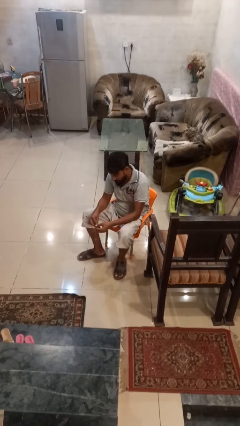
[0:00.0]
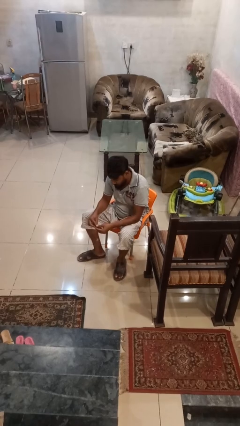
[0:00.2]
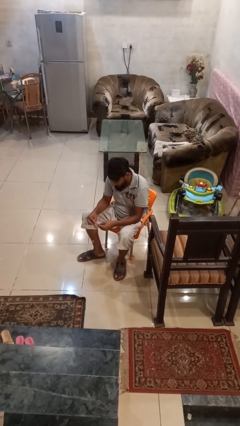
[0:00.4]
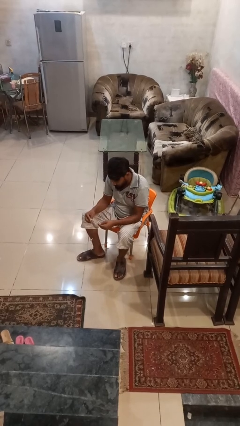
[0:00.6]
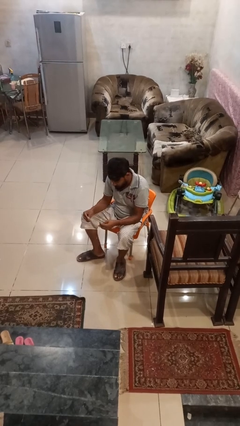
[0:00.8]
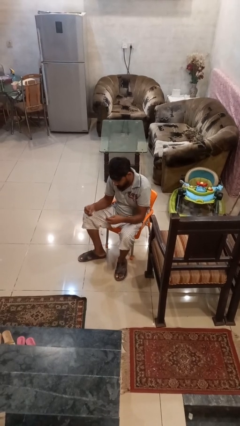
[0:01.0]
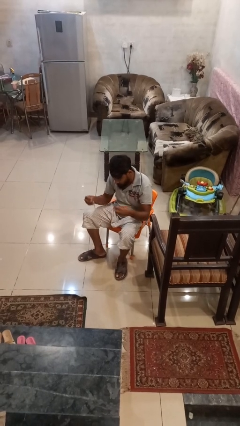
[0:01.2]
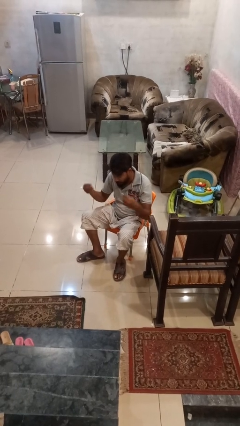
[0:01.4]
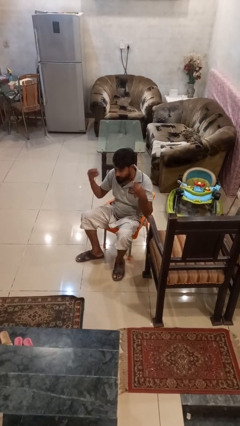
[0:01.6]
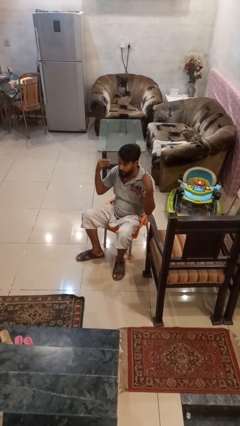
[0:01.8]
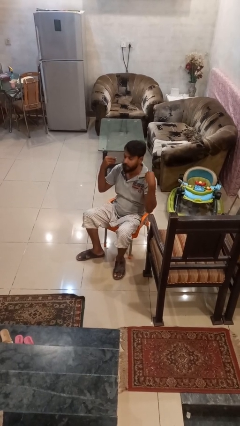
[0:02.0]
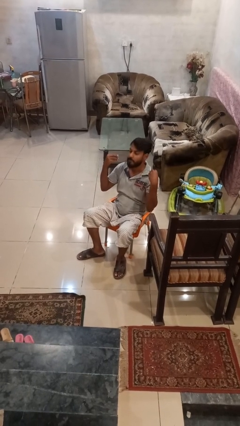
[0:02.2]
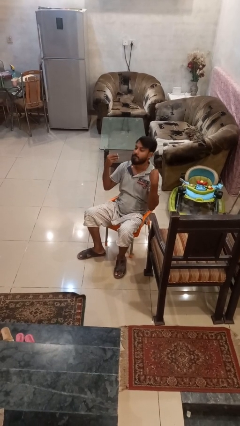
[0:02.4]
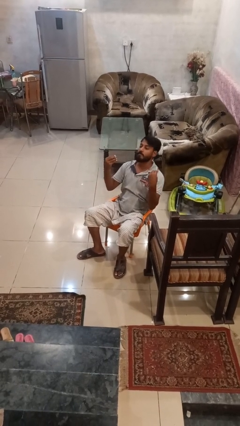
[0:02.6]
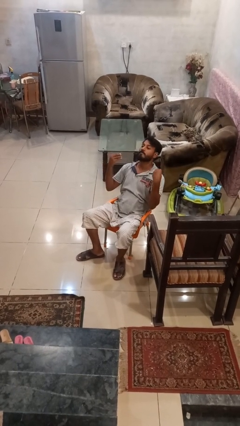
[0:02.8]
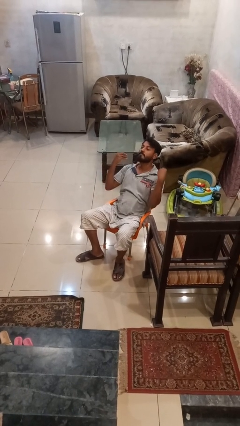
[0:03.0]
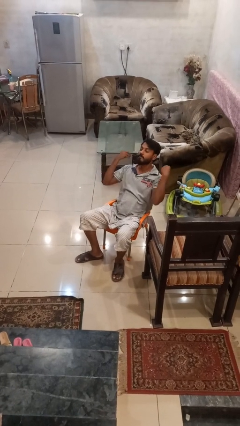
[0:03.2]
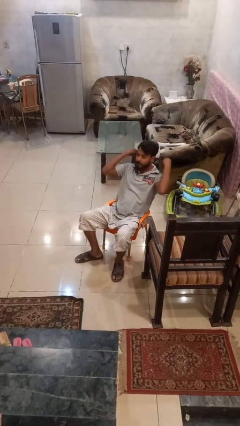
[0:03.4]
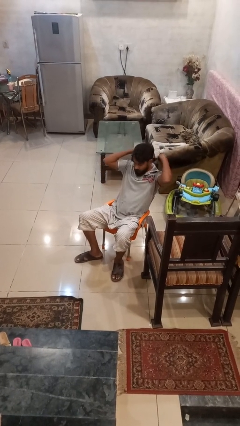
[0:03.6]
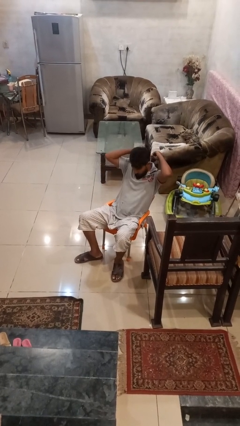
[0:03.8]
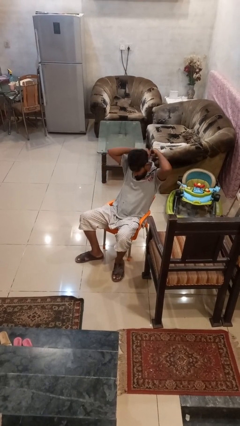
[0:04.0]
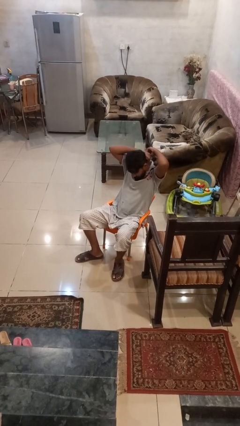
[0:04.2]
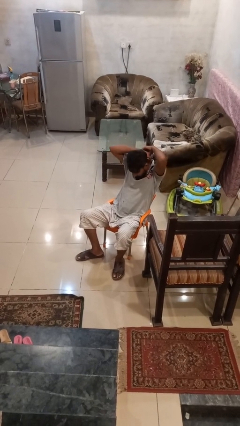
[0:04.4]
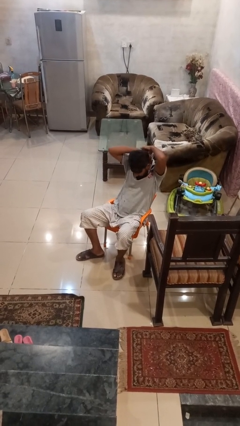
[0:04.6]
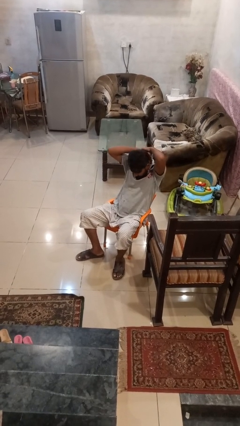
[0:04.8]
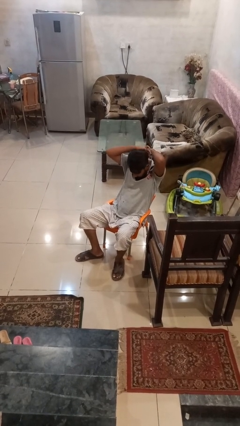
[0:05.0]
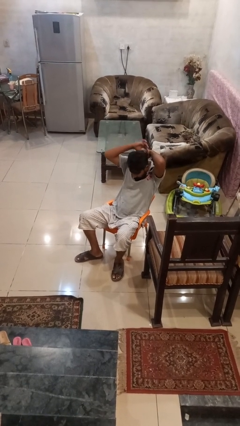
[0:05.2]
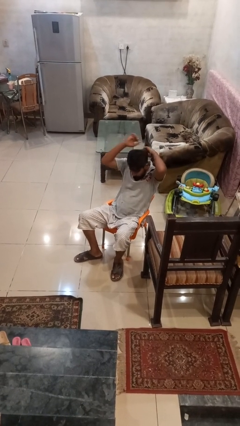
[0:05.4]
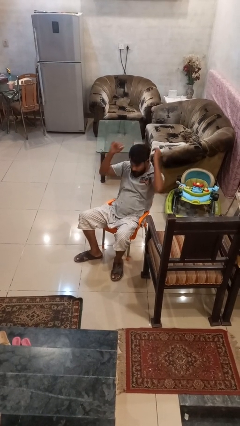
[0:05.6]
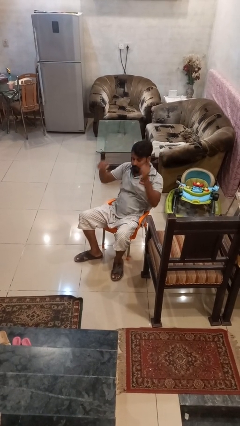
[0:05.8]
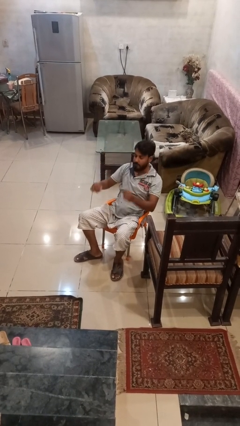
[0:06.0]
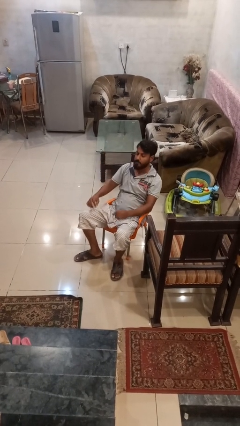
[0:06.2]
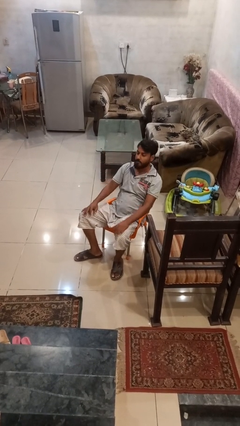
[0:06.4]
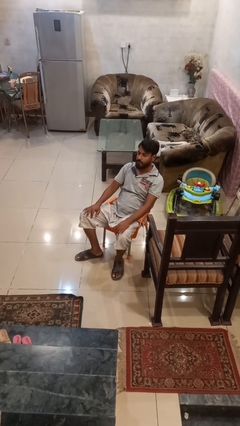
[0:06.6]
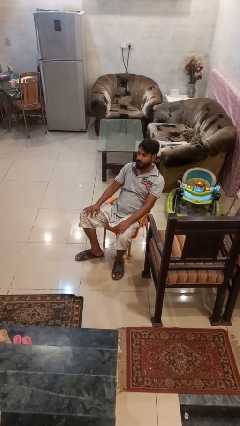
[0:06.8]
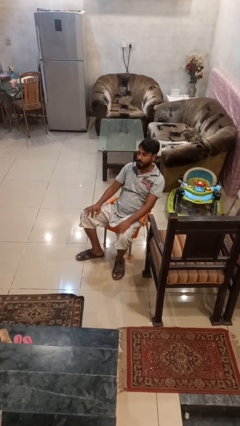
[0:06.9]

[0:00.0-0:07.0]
person puts on necklace

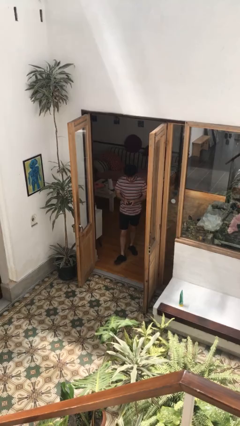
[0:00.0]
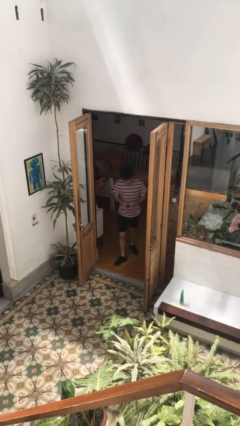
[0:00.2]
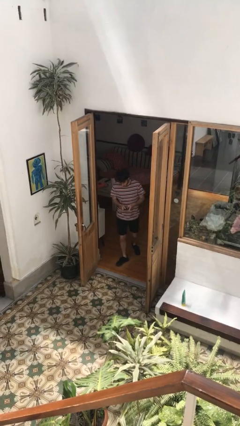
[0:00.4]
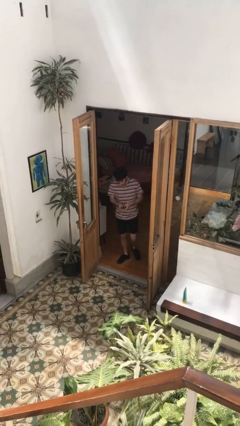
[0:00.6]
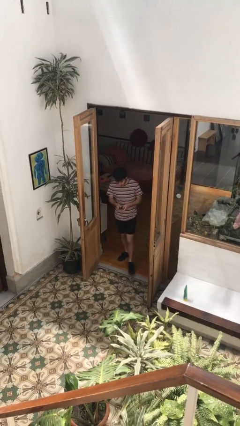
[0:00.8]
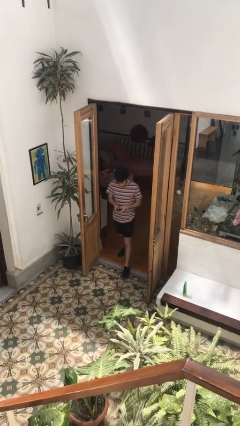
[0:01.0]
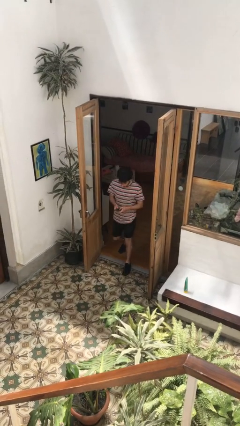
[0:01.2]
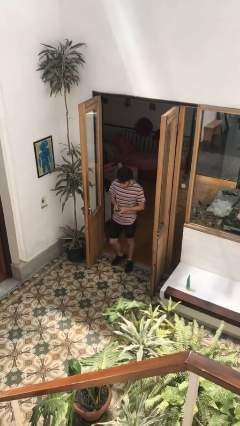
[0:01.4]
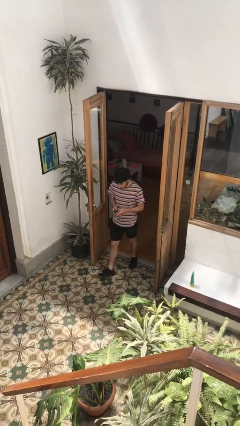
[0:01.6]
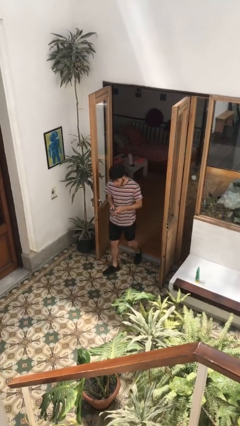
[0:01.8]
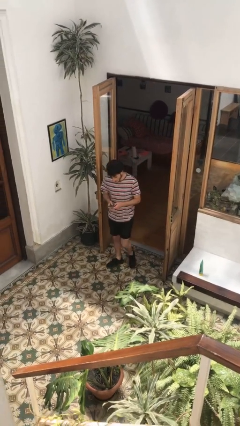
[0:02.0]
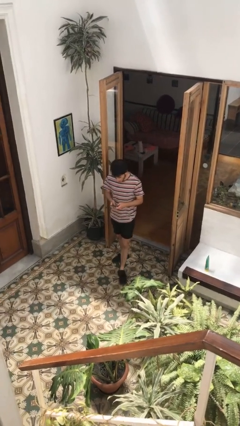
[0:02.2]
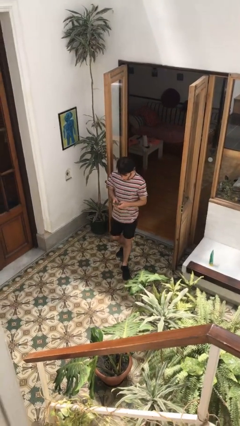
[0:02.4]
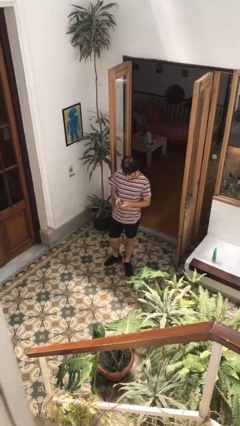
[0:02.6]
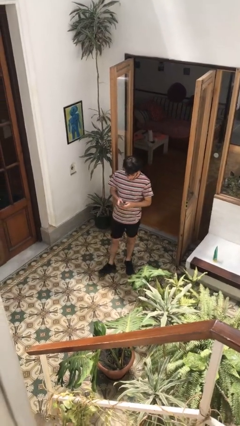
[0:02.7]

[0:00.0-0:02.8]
person enters scene through structure

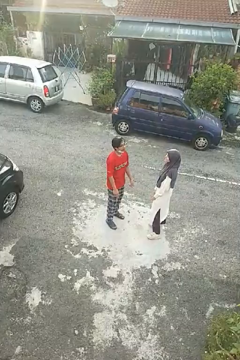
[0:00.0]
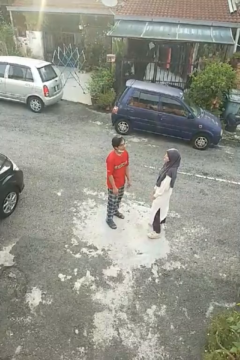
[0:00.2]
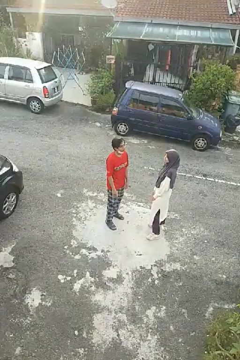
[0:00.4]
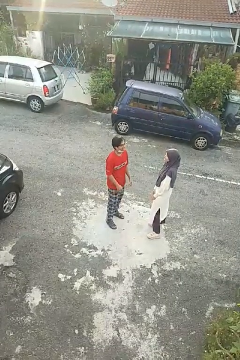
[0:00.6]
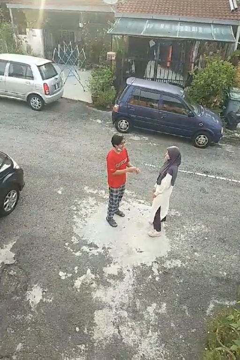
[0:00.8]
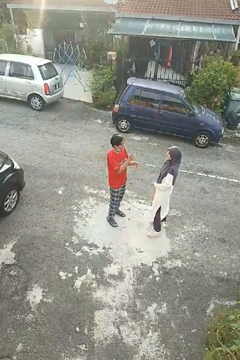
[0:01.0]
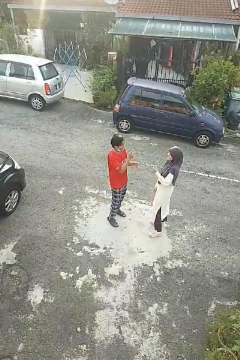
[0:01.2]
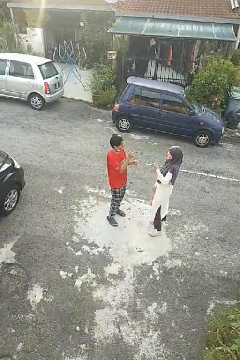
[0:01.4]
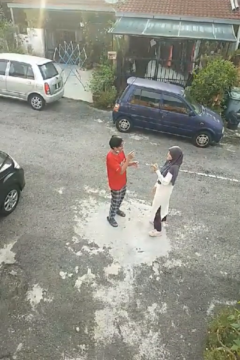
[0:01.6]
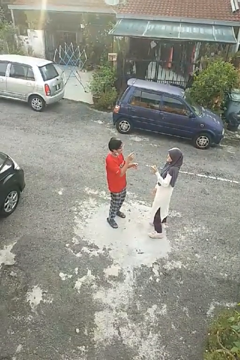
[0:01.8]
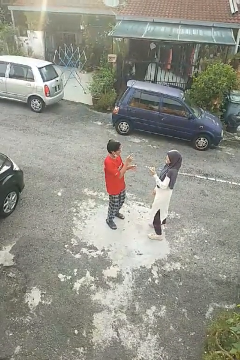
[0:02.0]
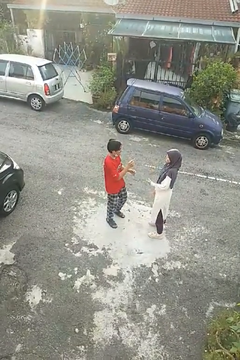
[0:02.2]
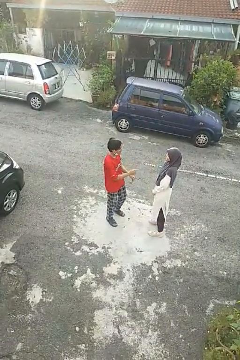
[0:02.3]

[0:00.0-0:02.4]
person laughs with person

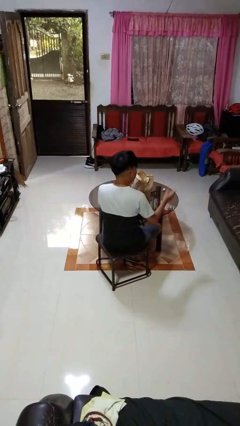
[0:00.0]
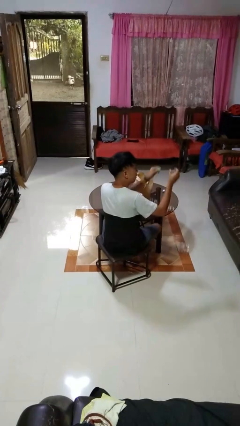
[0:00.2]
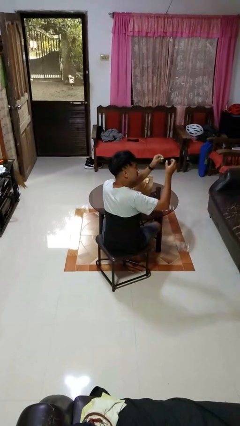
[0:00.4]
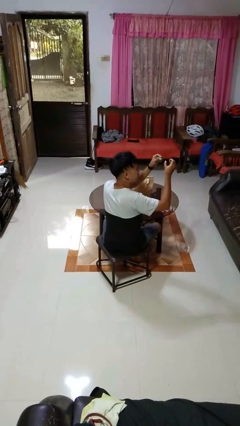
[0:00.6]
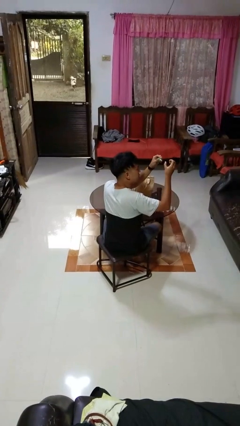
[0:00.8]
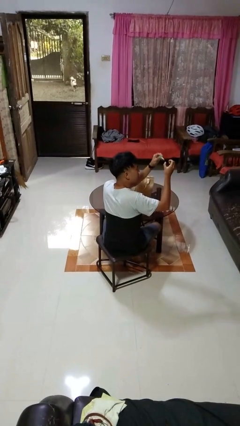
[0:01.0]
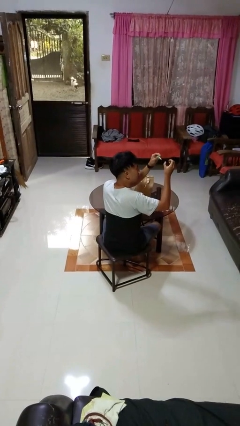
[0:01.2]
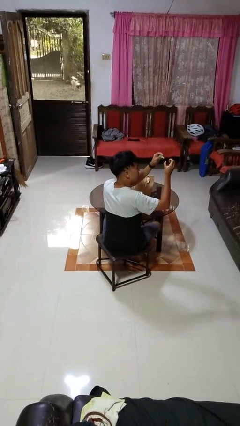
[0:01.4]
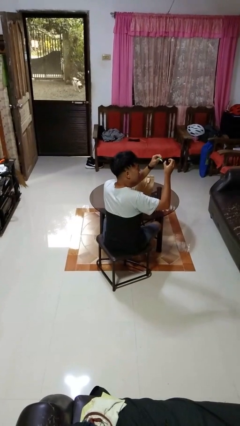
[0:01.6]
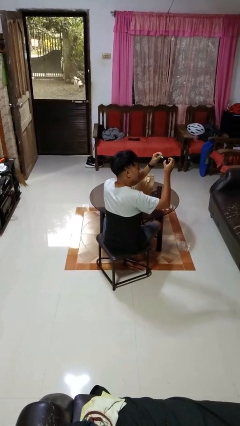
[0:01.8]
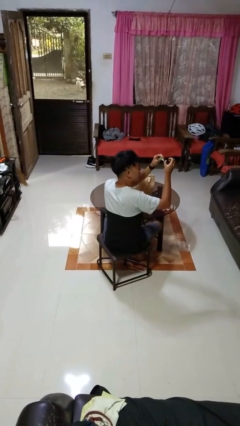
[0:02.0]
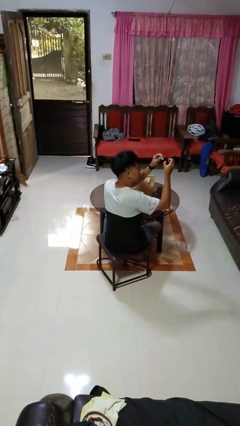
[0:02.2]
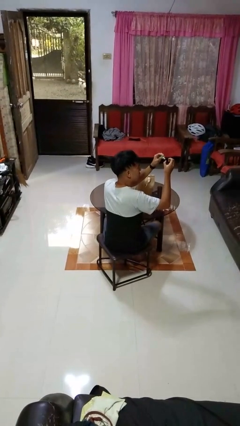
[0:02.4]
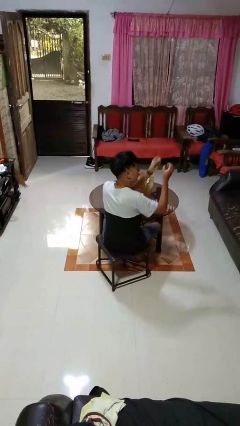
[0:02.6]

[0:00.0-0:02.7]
person paints fingernails

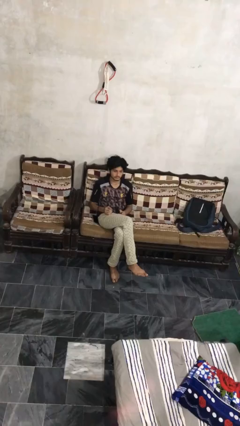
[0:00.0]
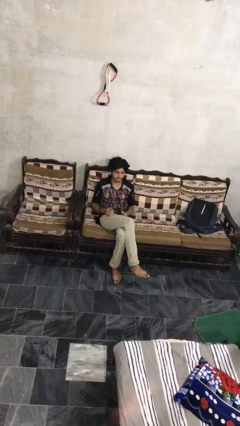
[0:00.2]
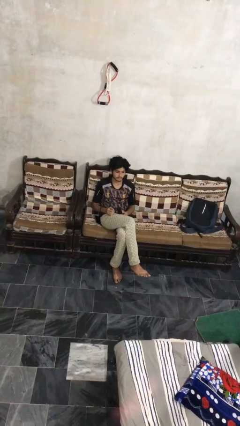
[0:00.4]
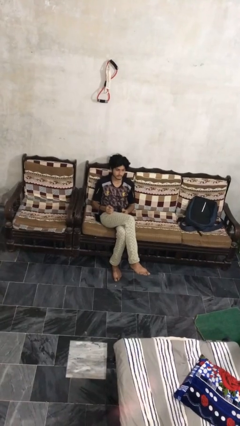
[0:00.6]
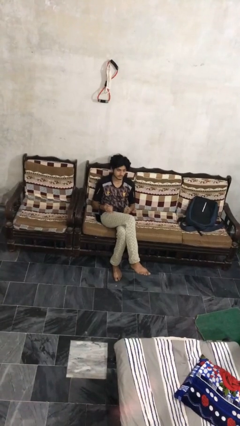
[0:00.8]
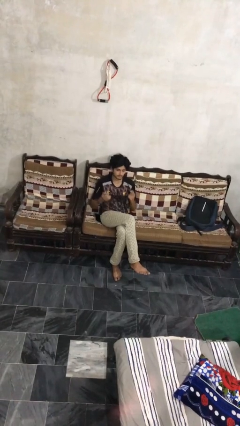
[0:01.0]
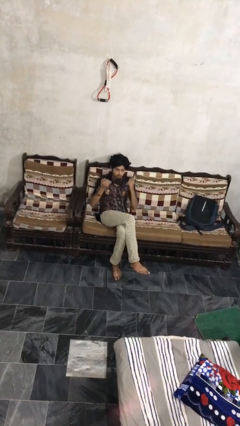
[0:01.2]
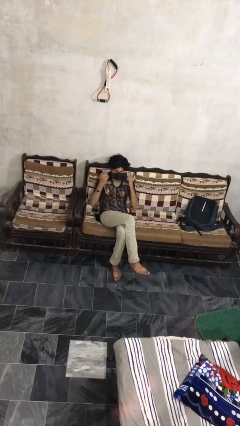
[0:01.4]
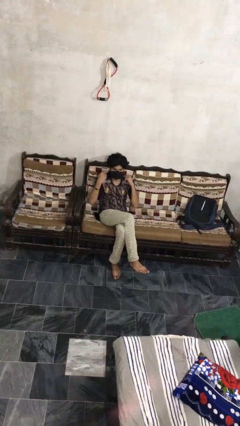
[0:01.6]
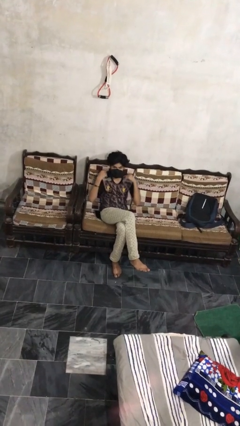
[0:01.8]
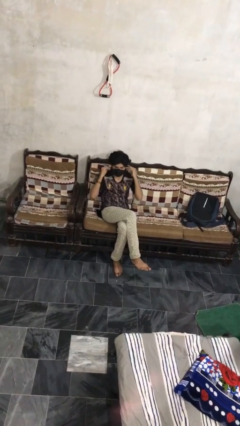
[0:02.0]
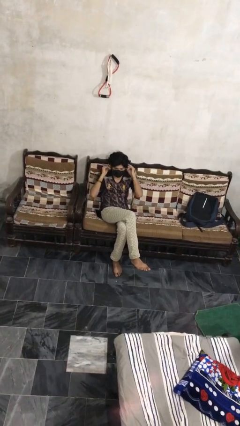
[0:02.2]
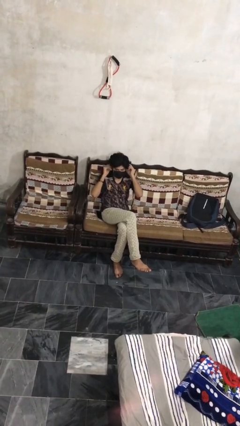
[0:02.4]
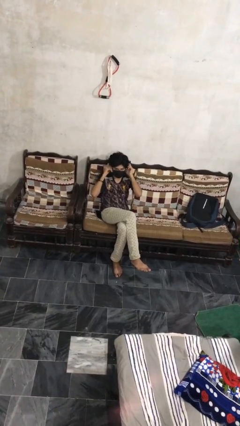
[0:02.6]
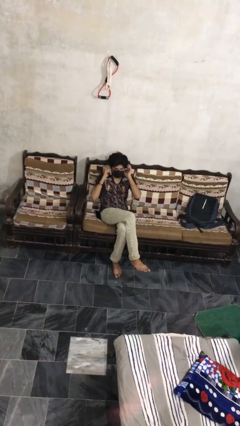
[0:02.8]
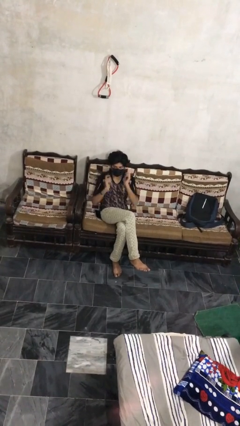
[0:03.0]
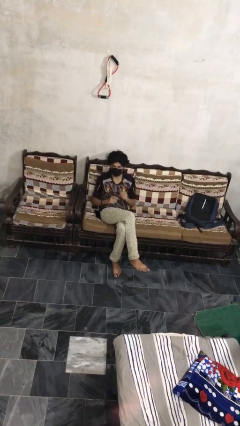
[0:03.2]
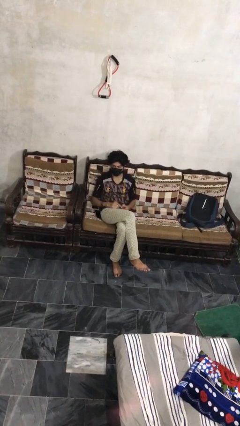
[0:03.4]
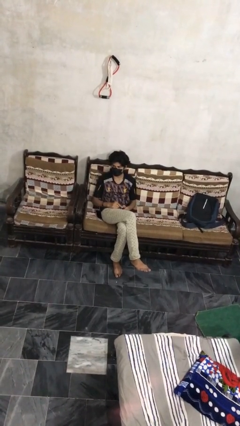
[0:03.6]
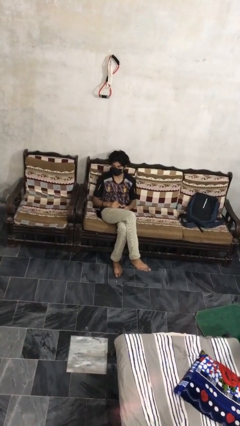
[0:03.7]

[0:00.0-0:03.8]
person puts on facemask
